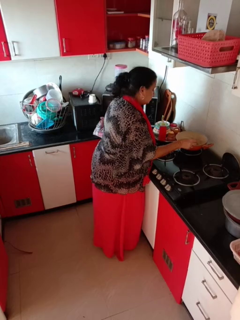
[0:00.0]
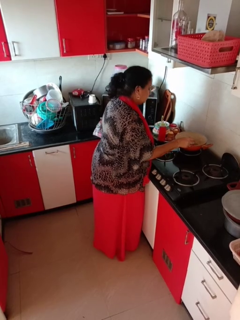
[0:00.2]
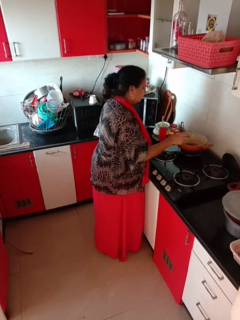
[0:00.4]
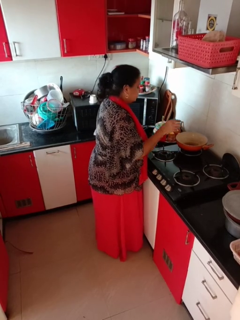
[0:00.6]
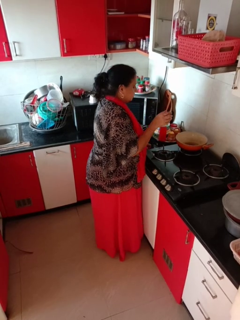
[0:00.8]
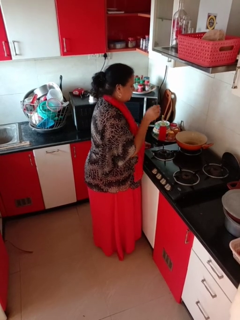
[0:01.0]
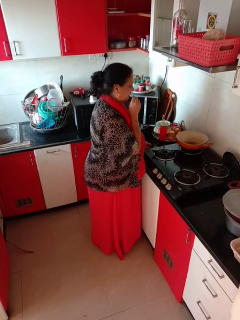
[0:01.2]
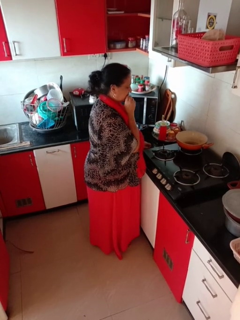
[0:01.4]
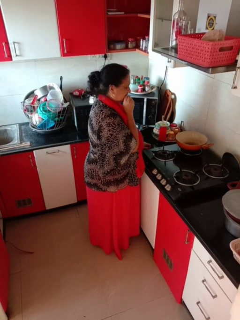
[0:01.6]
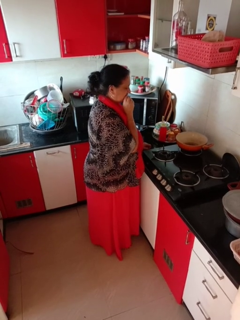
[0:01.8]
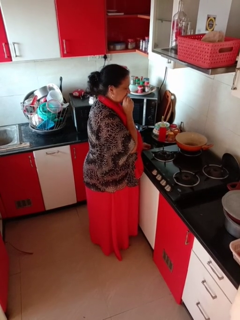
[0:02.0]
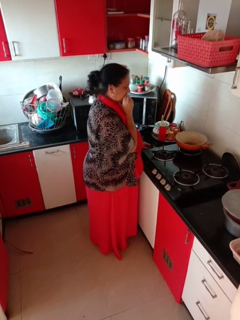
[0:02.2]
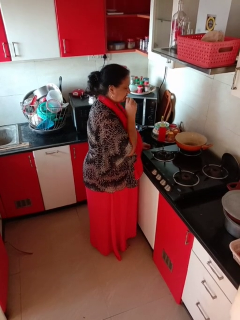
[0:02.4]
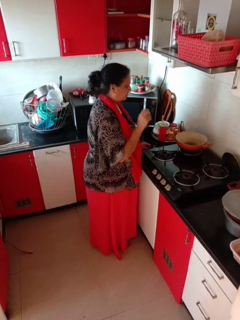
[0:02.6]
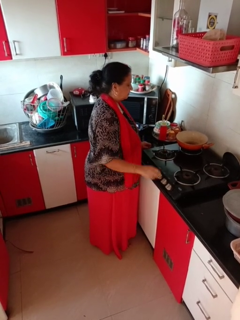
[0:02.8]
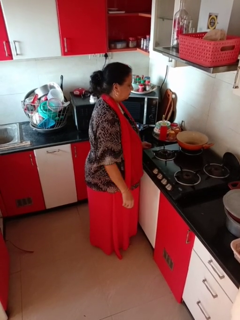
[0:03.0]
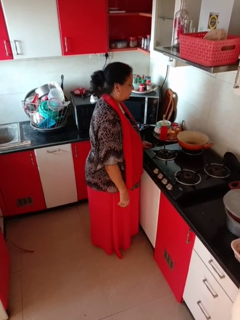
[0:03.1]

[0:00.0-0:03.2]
person burns hand

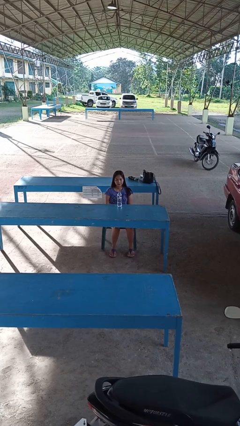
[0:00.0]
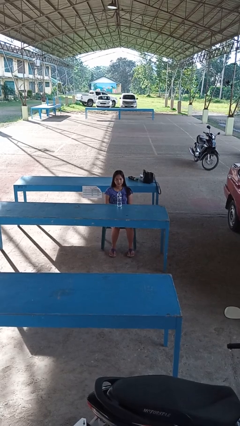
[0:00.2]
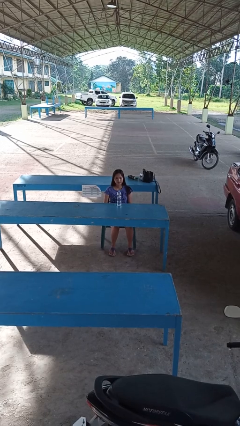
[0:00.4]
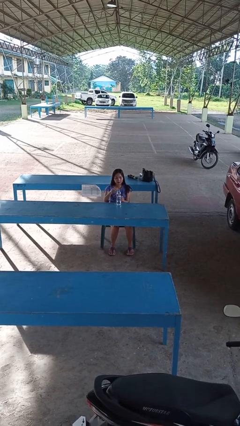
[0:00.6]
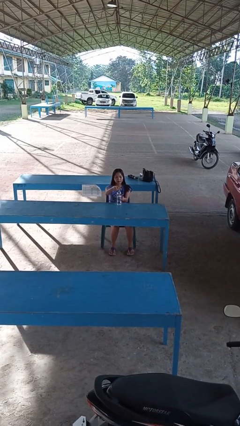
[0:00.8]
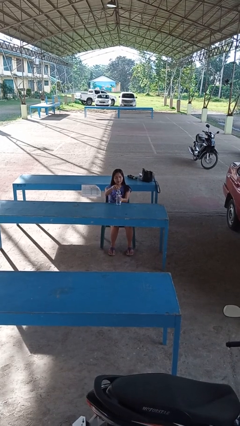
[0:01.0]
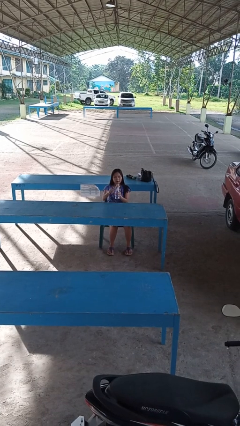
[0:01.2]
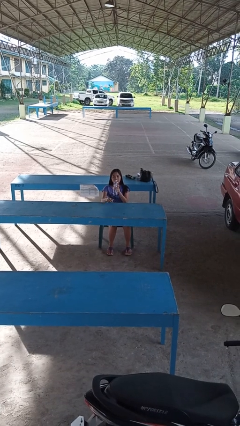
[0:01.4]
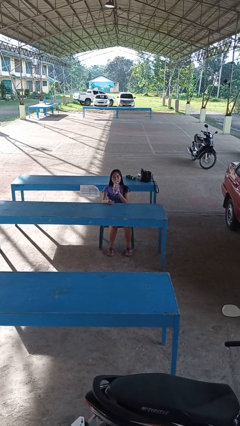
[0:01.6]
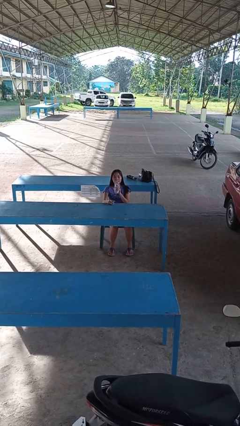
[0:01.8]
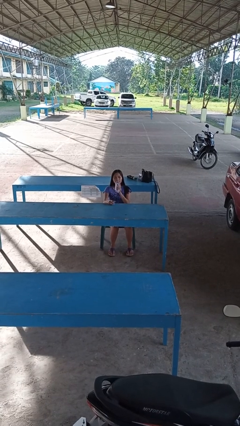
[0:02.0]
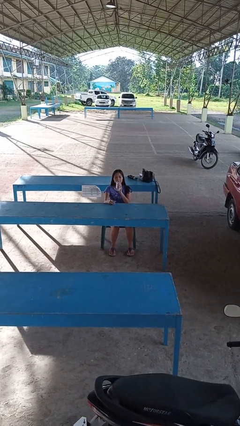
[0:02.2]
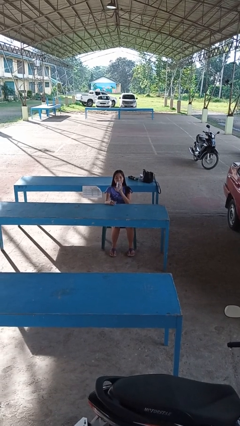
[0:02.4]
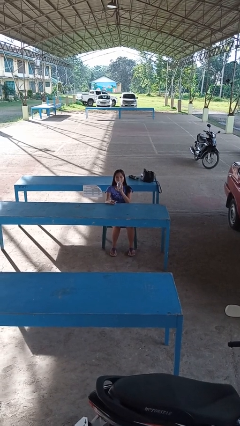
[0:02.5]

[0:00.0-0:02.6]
person drinks from bottle

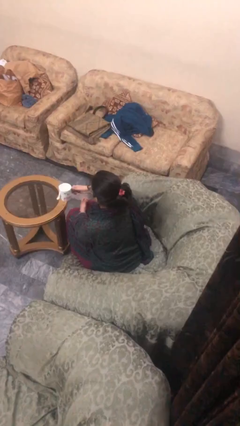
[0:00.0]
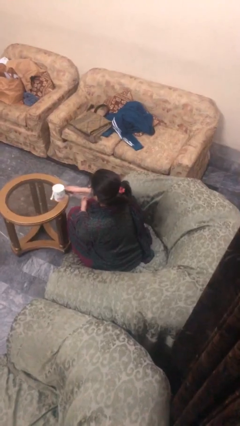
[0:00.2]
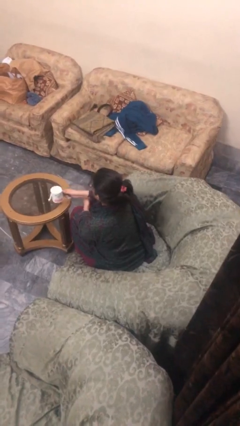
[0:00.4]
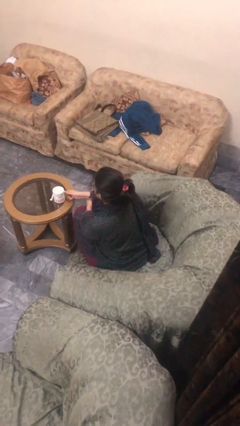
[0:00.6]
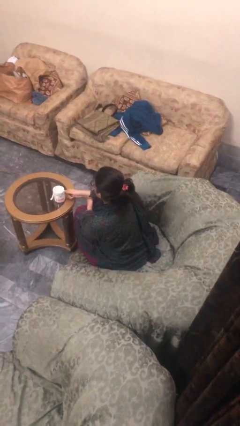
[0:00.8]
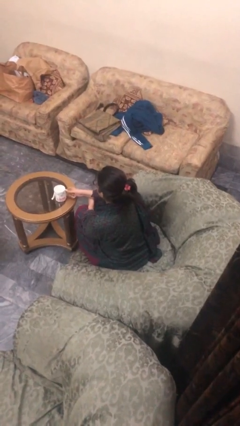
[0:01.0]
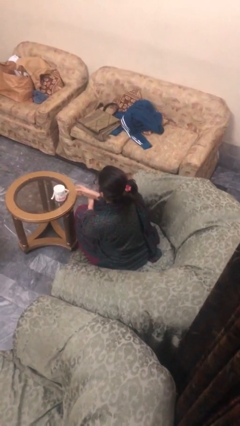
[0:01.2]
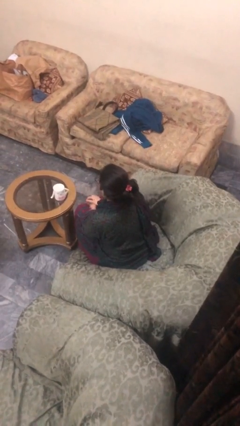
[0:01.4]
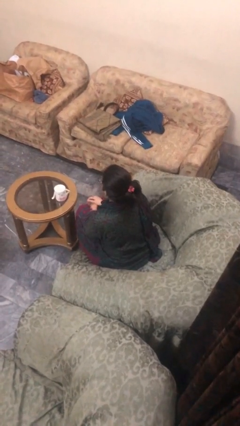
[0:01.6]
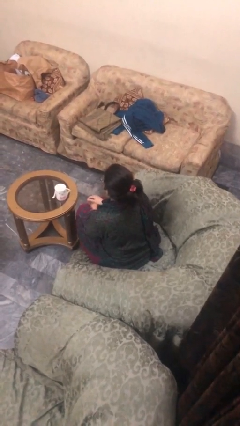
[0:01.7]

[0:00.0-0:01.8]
person puts down object on table

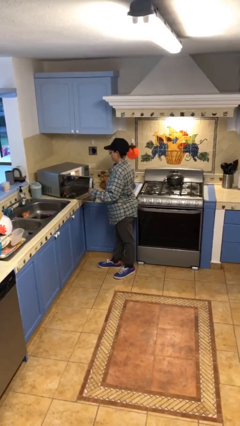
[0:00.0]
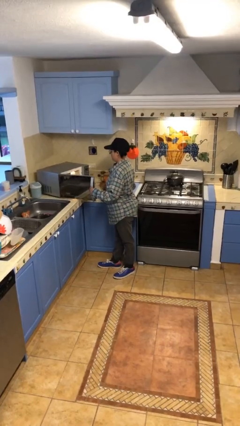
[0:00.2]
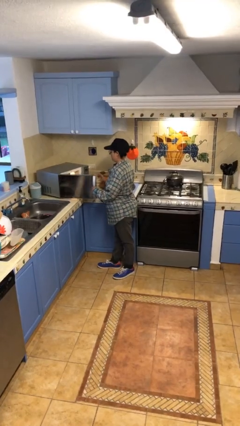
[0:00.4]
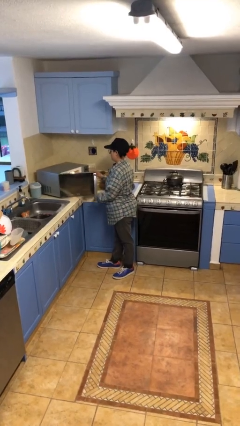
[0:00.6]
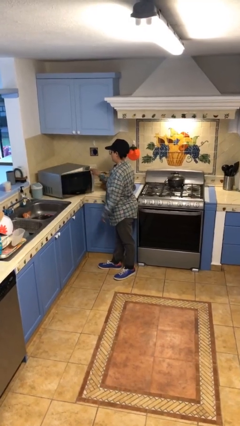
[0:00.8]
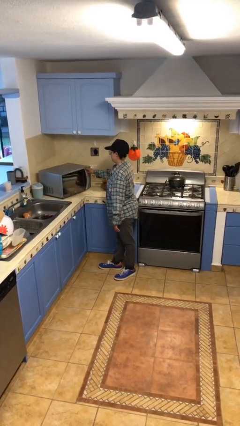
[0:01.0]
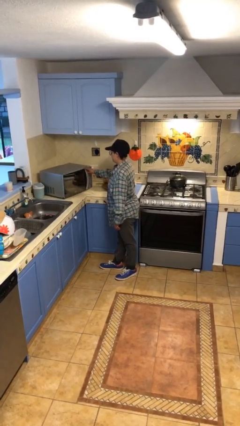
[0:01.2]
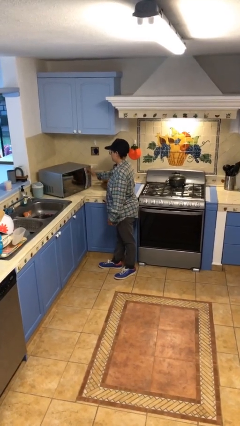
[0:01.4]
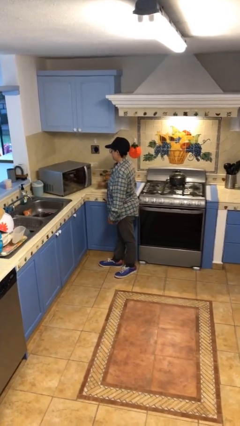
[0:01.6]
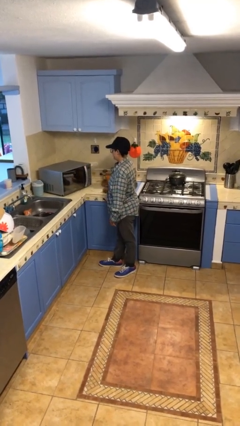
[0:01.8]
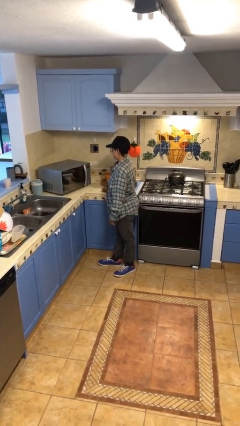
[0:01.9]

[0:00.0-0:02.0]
person closes microwave

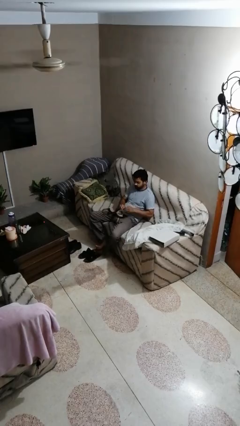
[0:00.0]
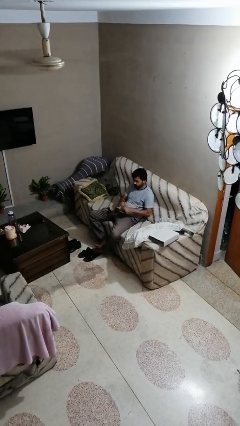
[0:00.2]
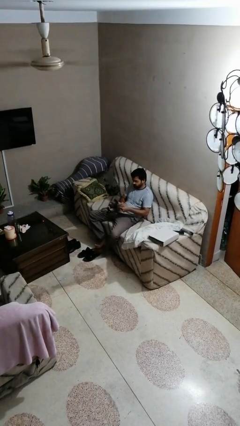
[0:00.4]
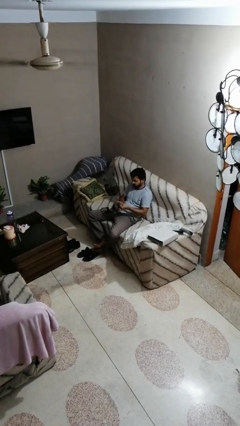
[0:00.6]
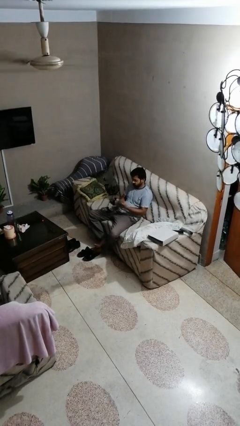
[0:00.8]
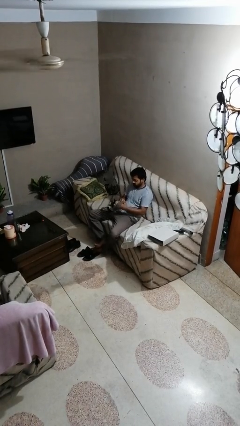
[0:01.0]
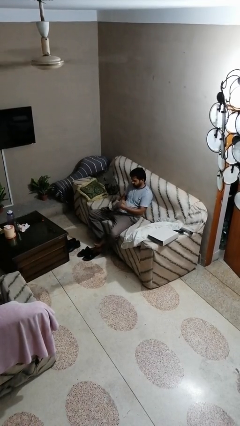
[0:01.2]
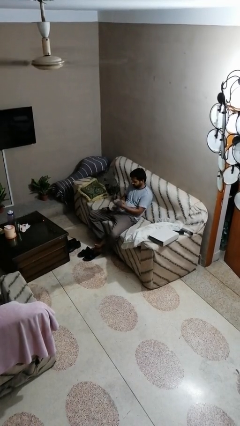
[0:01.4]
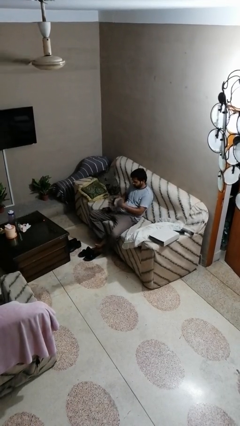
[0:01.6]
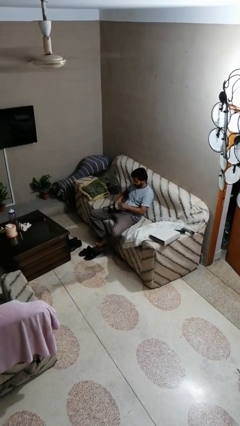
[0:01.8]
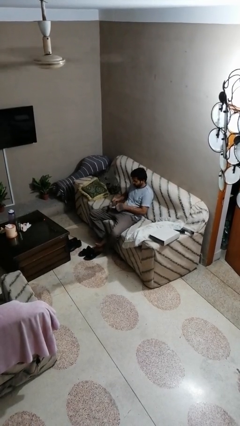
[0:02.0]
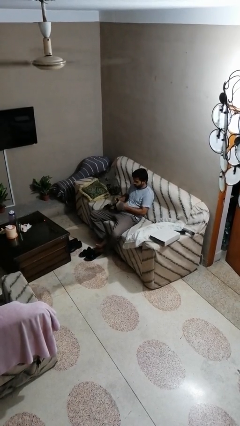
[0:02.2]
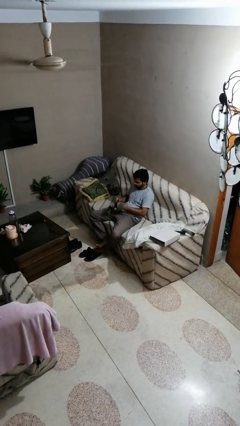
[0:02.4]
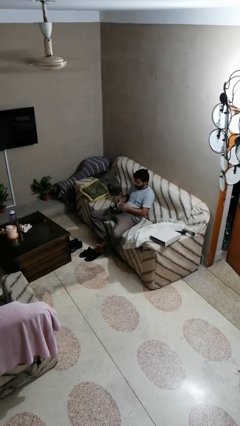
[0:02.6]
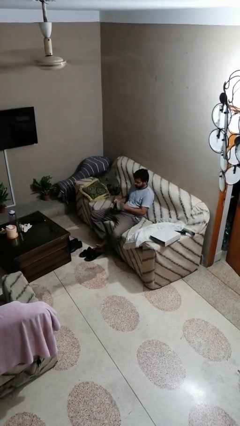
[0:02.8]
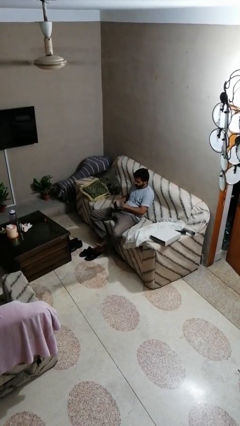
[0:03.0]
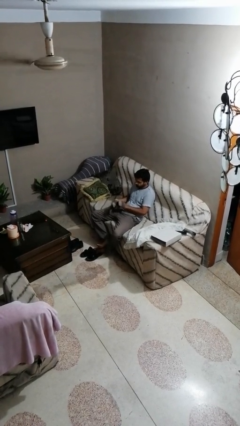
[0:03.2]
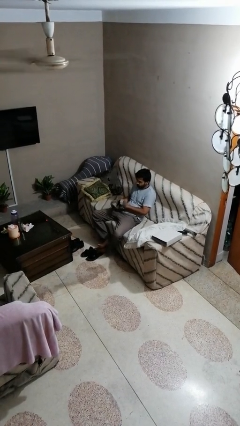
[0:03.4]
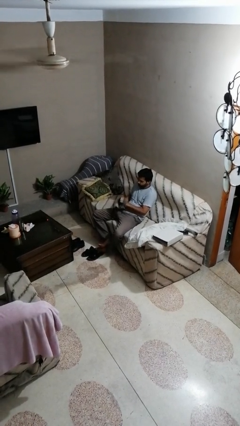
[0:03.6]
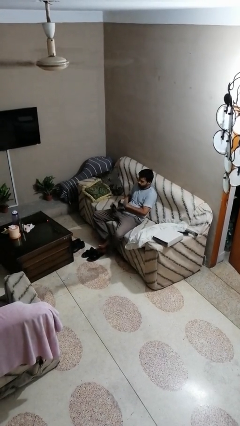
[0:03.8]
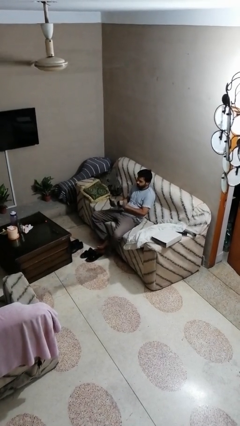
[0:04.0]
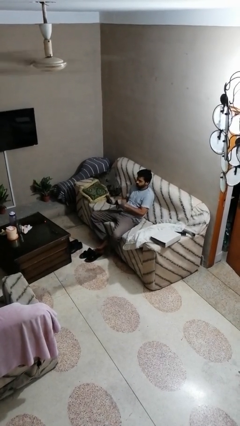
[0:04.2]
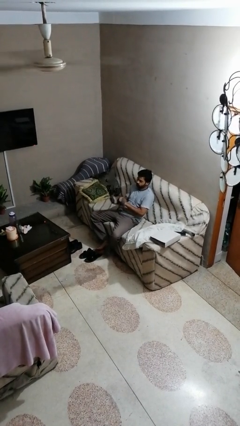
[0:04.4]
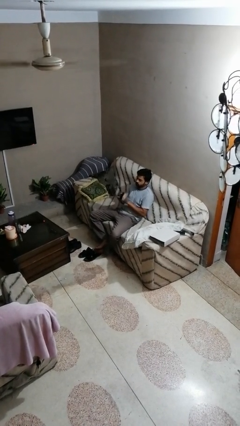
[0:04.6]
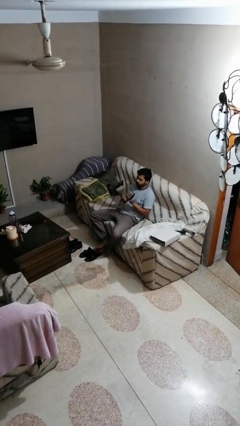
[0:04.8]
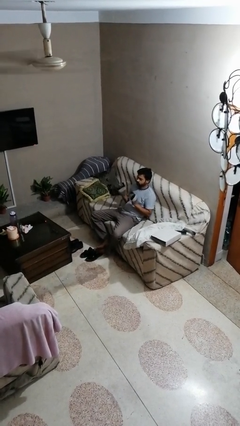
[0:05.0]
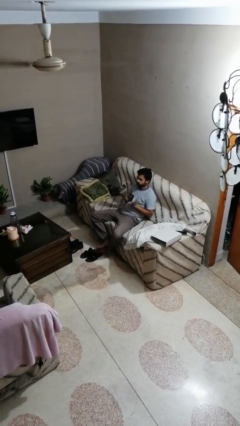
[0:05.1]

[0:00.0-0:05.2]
person puts on gloves

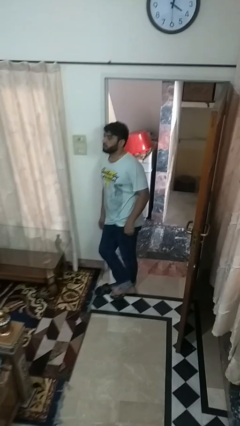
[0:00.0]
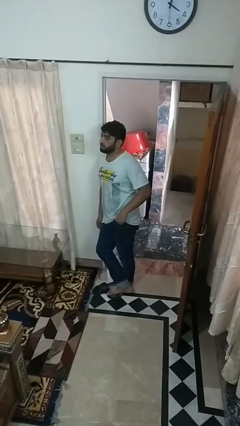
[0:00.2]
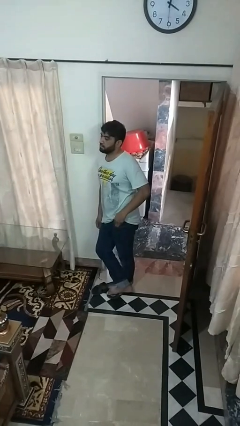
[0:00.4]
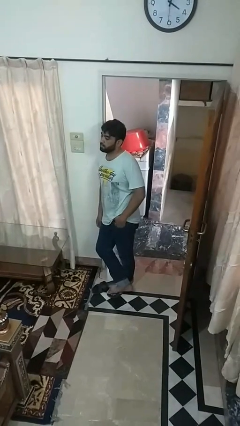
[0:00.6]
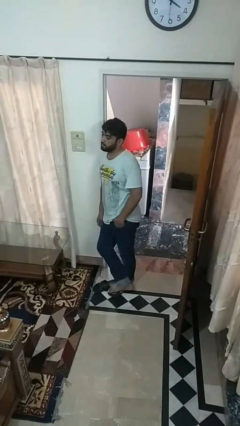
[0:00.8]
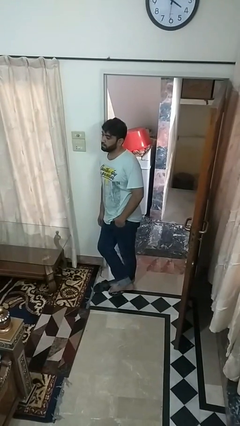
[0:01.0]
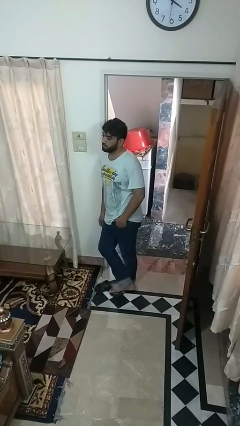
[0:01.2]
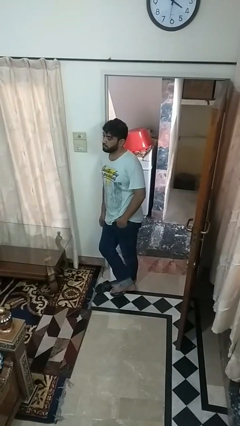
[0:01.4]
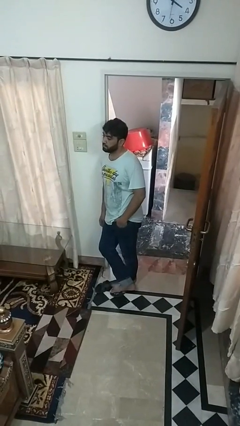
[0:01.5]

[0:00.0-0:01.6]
person puts hands in back pockets

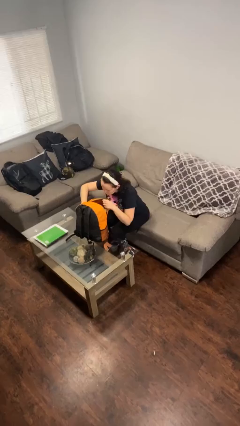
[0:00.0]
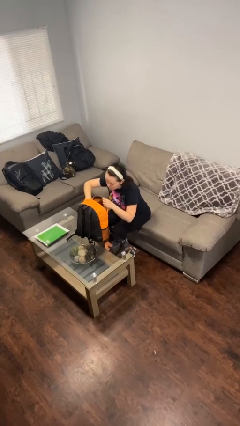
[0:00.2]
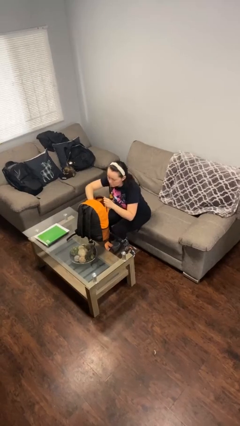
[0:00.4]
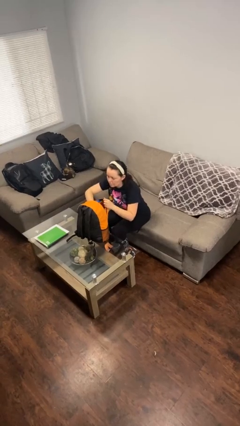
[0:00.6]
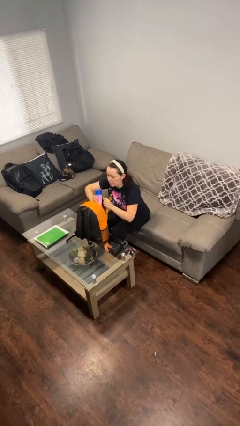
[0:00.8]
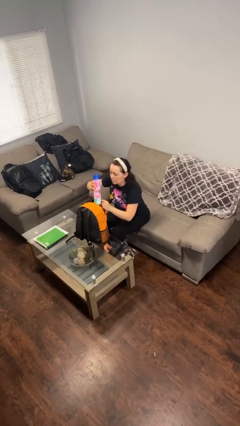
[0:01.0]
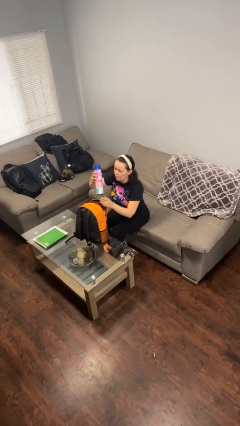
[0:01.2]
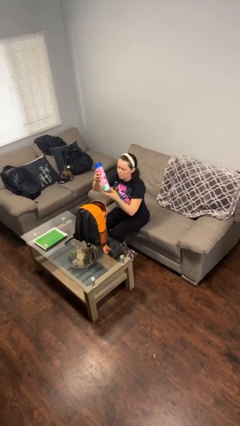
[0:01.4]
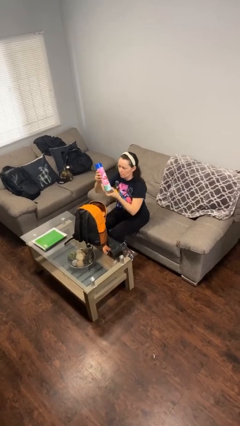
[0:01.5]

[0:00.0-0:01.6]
person takes object from backpack
